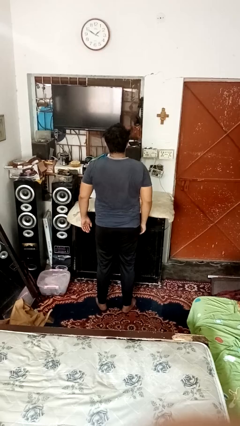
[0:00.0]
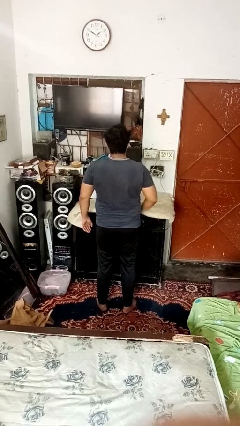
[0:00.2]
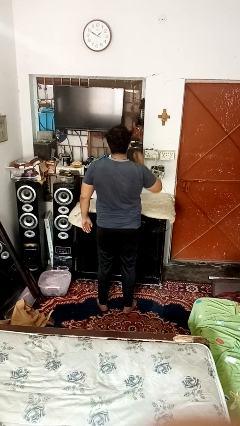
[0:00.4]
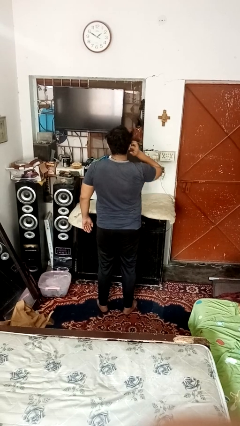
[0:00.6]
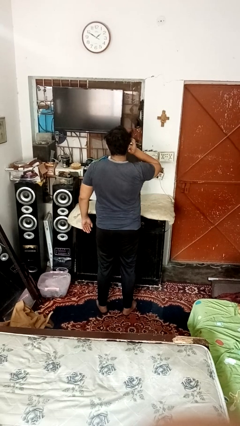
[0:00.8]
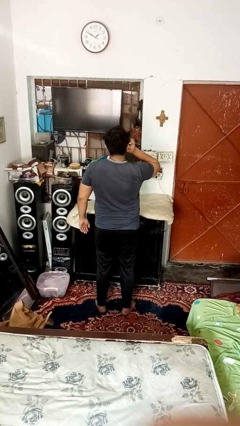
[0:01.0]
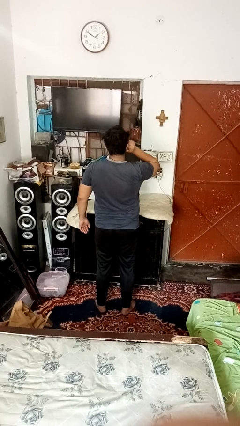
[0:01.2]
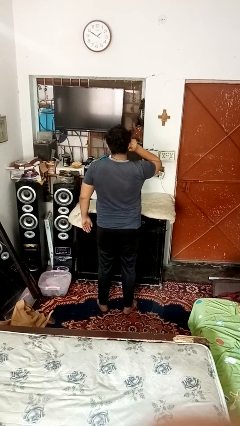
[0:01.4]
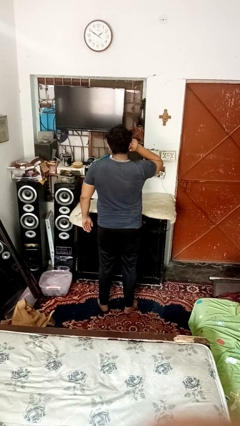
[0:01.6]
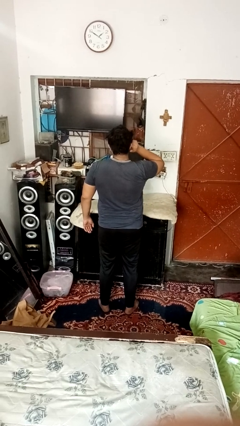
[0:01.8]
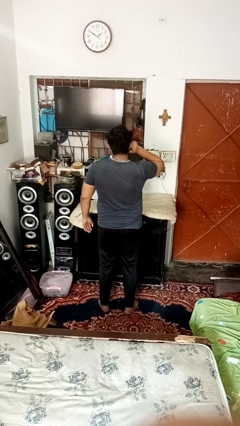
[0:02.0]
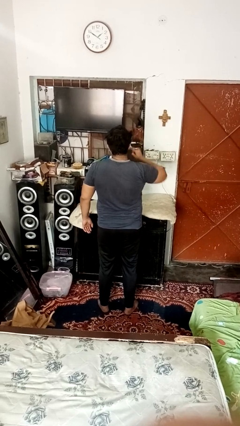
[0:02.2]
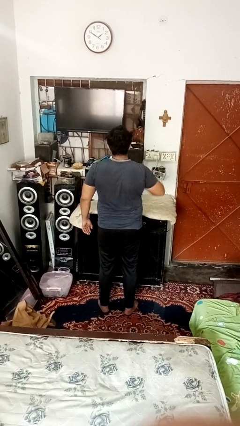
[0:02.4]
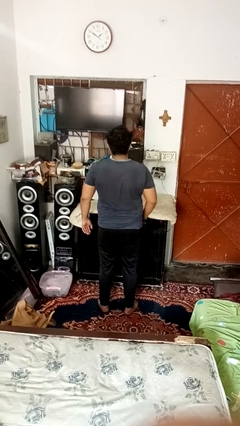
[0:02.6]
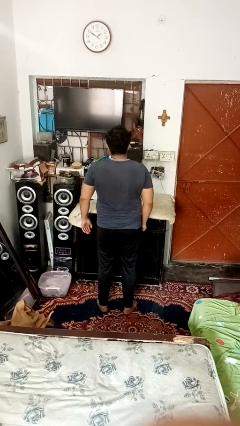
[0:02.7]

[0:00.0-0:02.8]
person puts fingers in ear

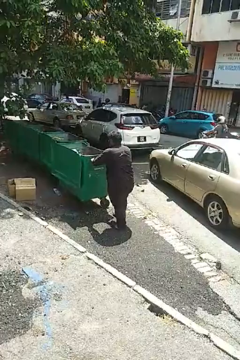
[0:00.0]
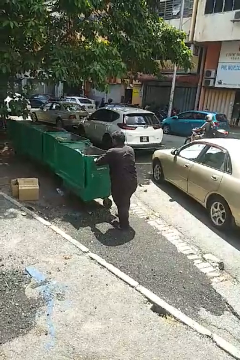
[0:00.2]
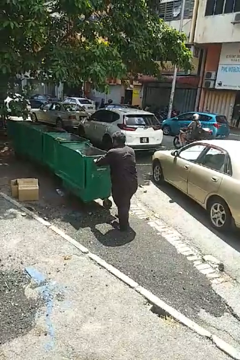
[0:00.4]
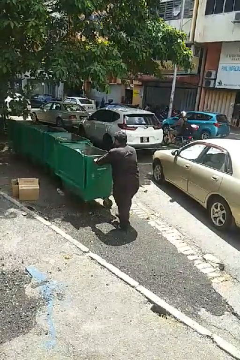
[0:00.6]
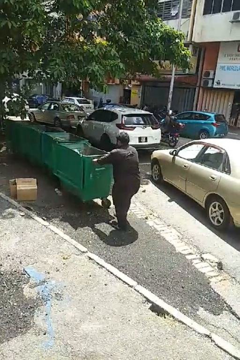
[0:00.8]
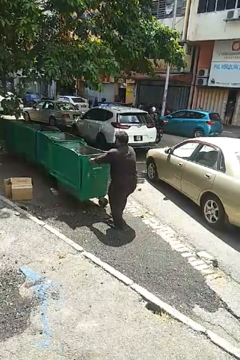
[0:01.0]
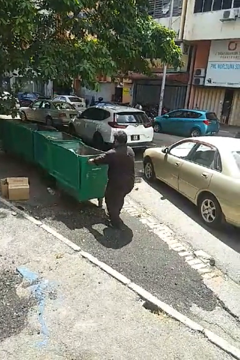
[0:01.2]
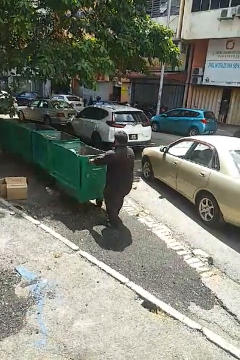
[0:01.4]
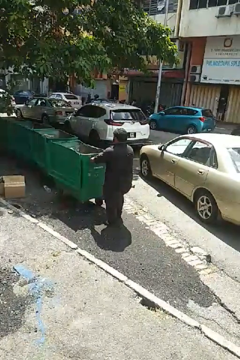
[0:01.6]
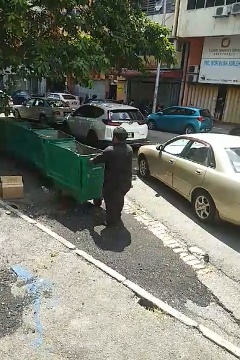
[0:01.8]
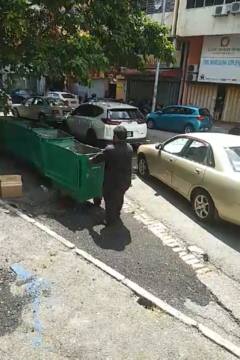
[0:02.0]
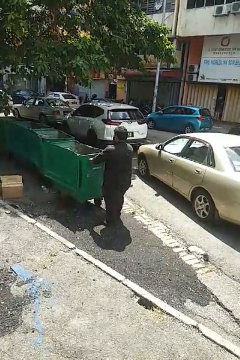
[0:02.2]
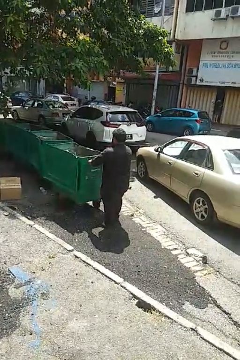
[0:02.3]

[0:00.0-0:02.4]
person pulls wheeled trashcan

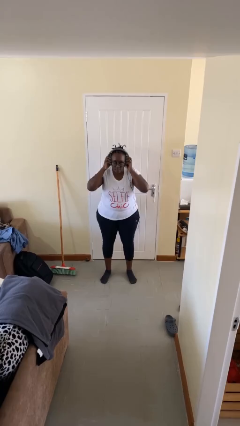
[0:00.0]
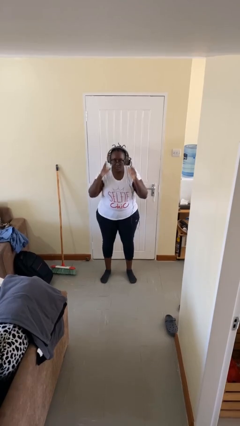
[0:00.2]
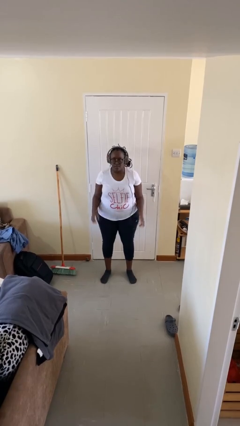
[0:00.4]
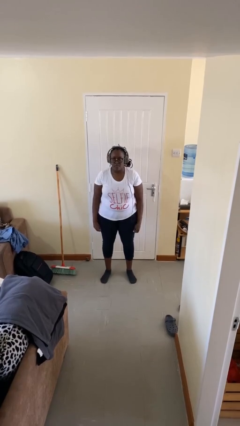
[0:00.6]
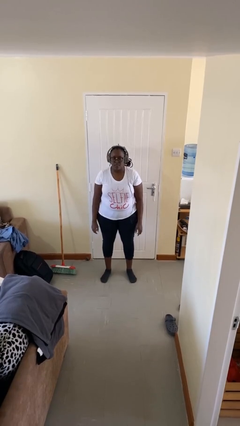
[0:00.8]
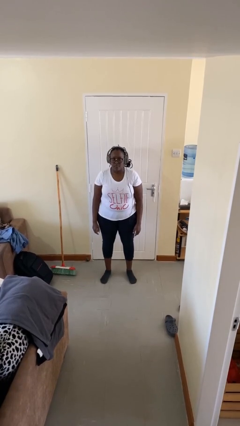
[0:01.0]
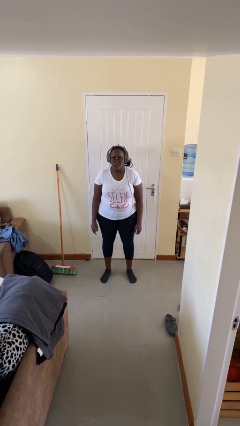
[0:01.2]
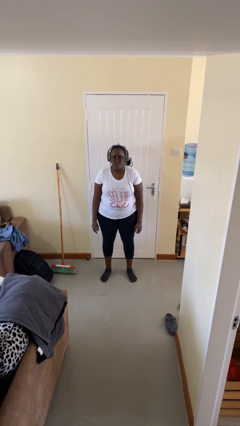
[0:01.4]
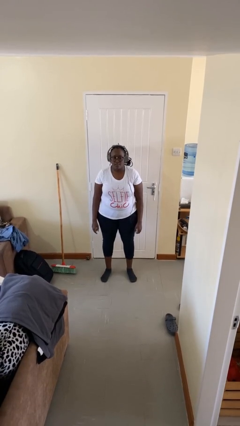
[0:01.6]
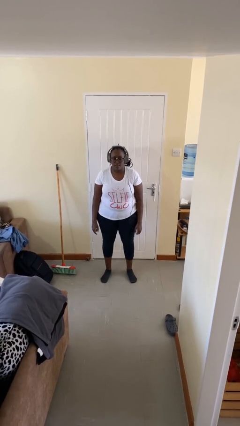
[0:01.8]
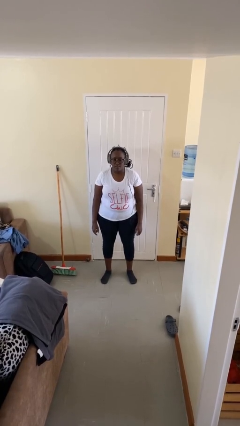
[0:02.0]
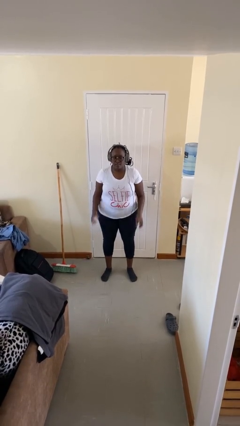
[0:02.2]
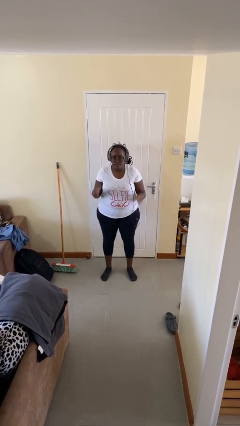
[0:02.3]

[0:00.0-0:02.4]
person puts on headphones

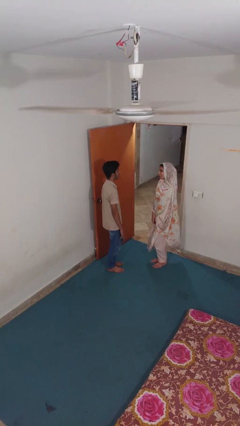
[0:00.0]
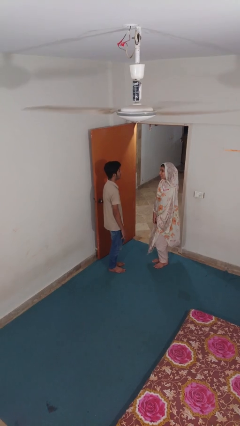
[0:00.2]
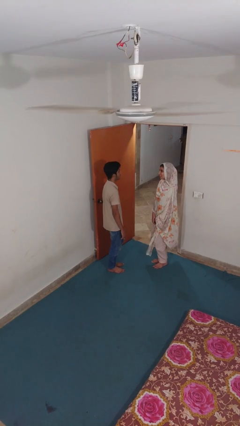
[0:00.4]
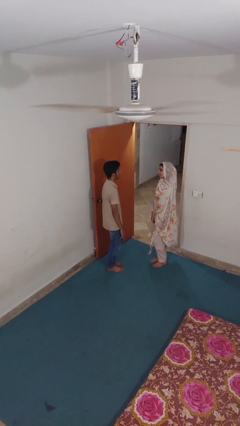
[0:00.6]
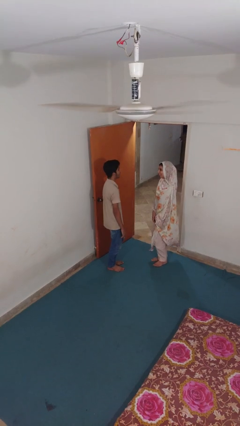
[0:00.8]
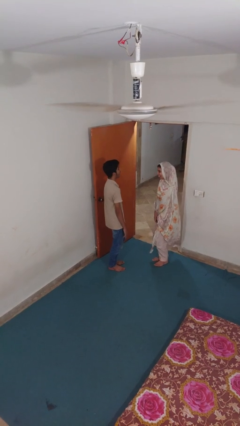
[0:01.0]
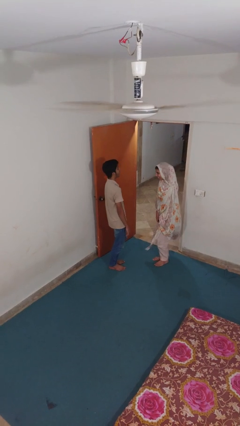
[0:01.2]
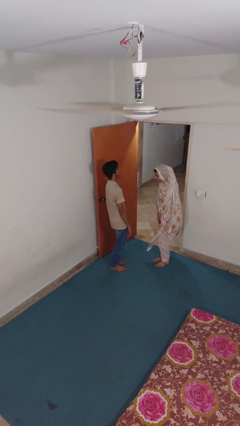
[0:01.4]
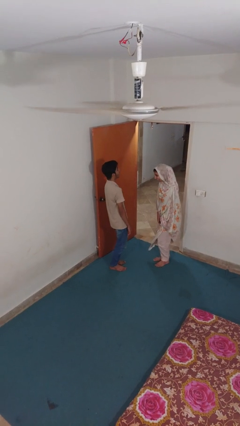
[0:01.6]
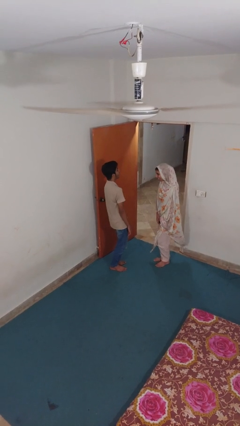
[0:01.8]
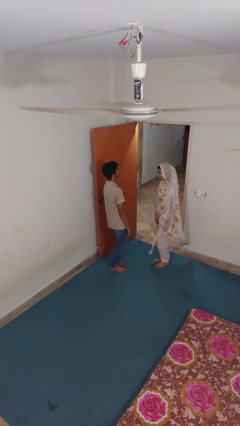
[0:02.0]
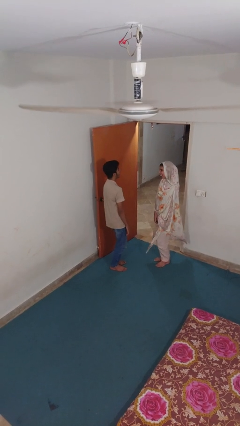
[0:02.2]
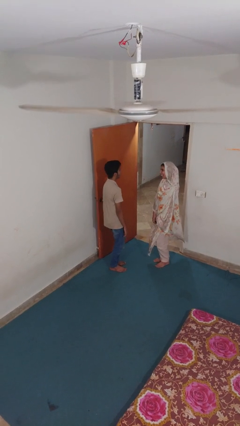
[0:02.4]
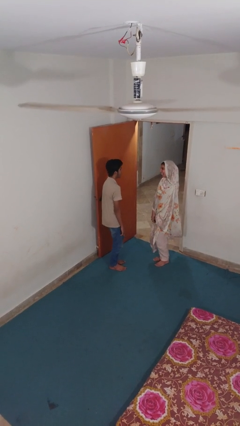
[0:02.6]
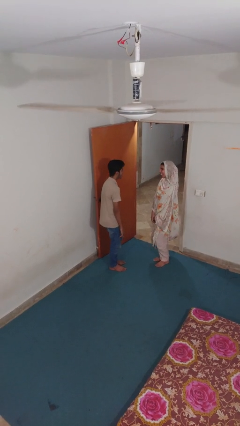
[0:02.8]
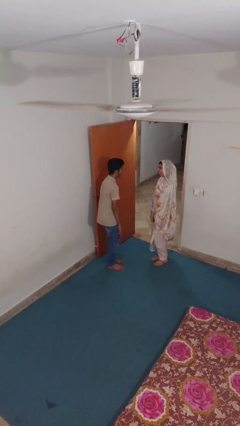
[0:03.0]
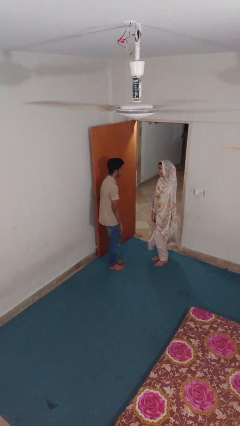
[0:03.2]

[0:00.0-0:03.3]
person laughs with person

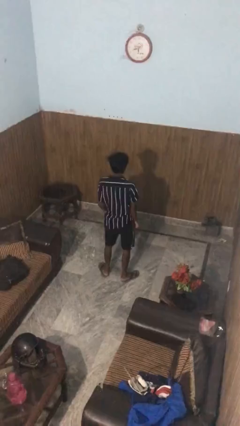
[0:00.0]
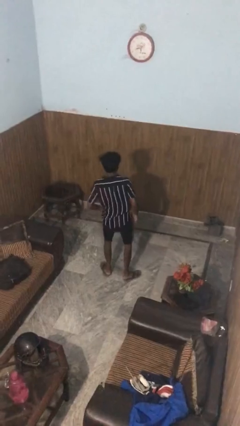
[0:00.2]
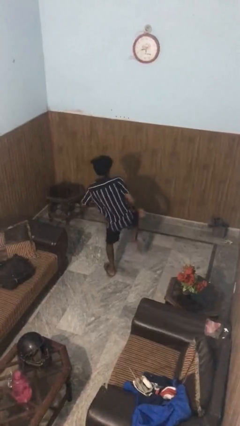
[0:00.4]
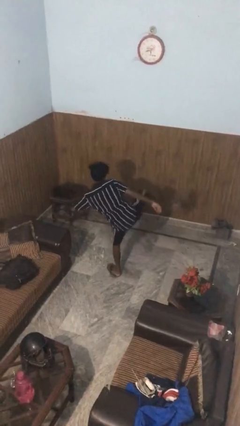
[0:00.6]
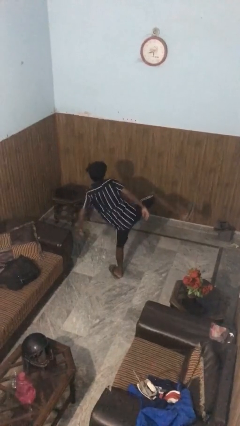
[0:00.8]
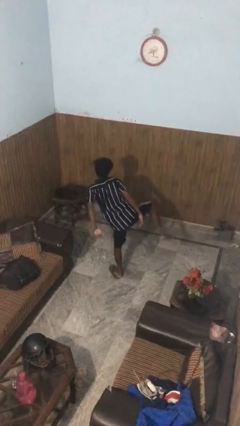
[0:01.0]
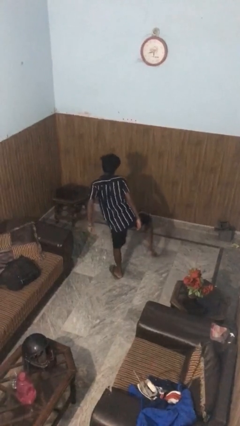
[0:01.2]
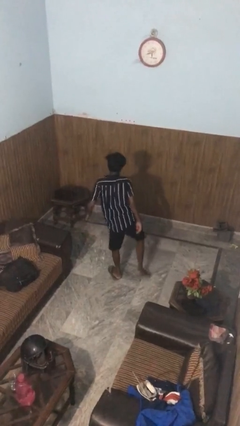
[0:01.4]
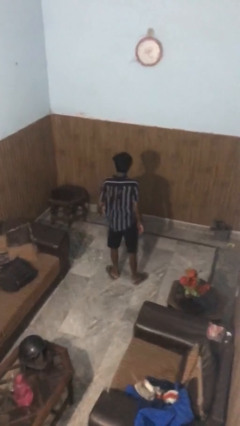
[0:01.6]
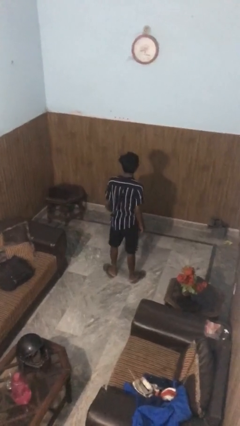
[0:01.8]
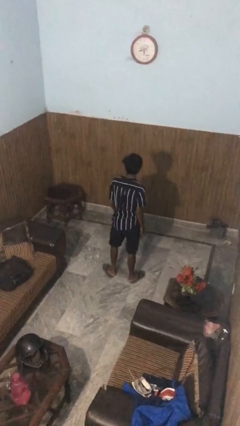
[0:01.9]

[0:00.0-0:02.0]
person karate kicks

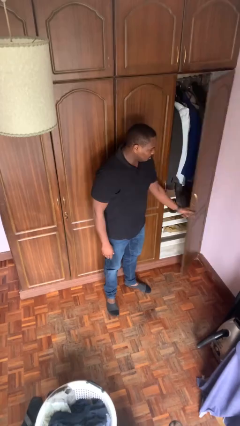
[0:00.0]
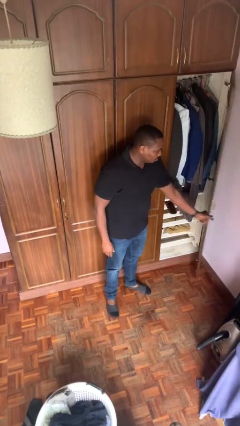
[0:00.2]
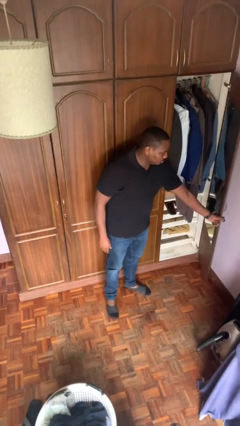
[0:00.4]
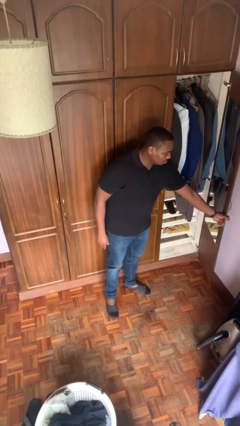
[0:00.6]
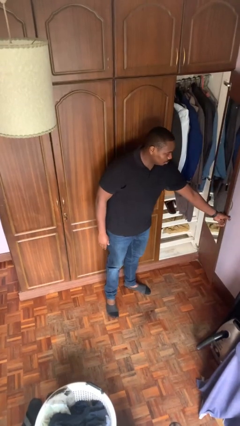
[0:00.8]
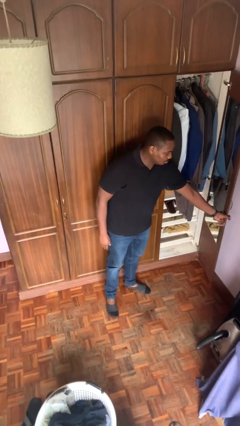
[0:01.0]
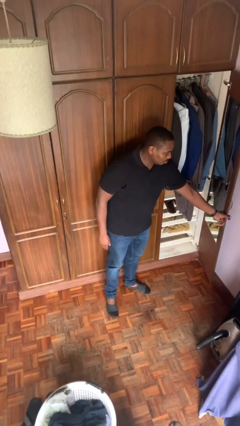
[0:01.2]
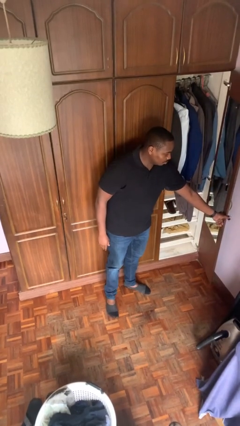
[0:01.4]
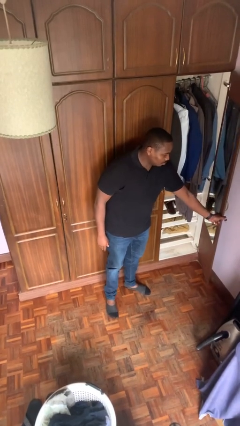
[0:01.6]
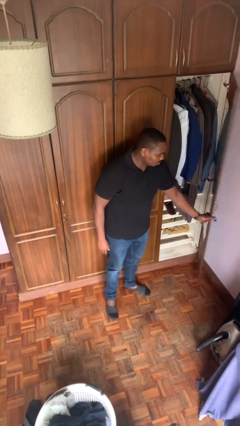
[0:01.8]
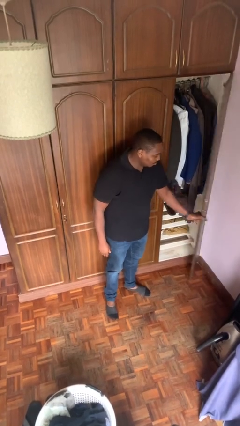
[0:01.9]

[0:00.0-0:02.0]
person opens closet door

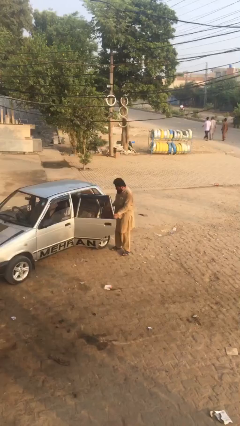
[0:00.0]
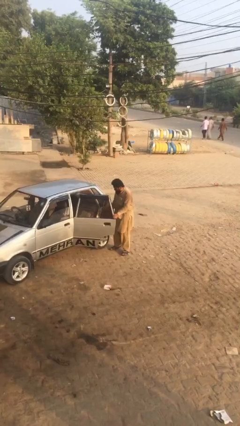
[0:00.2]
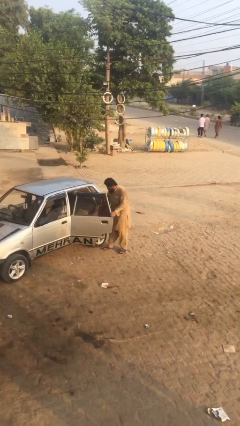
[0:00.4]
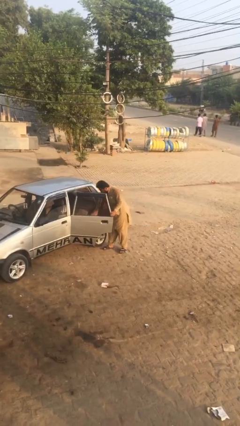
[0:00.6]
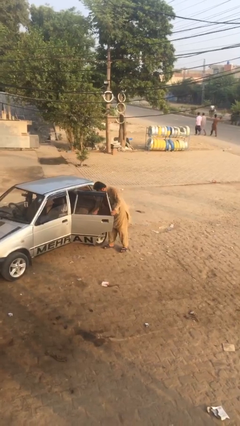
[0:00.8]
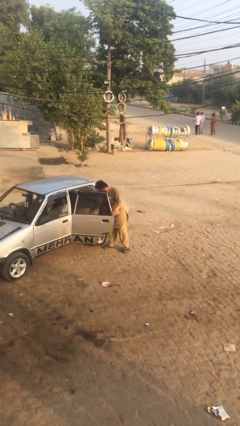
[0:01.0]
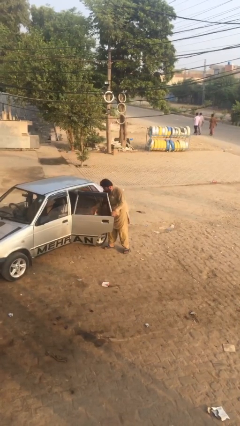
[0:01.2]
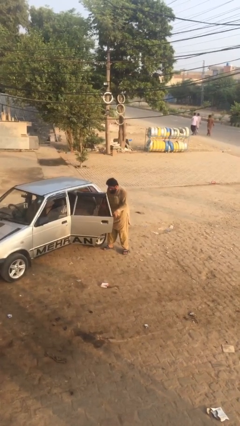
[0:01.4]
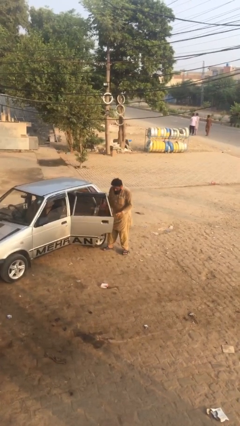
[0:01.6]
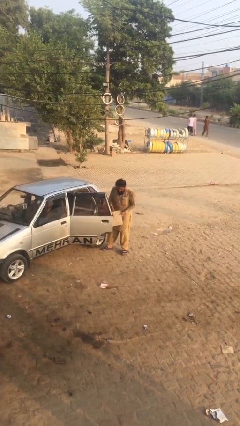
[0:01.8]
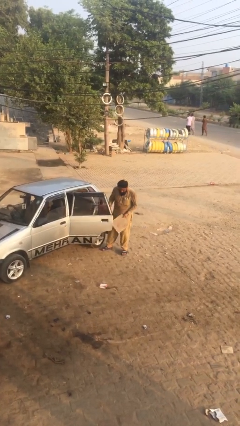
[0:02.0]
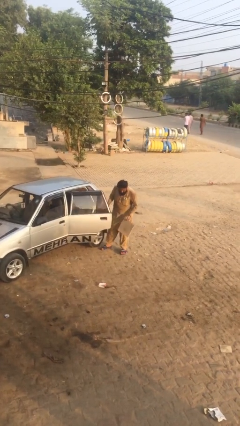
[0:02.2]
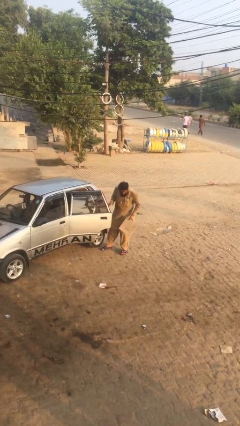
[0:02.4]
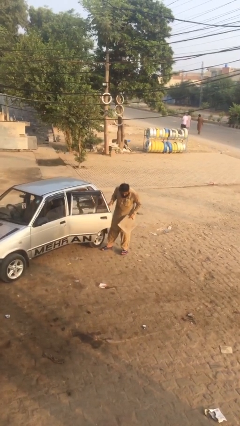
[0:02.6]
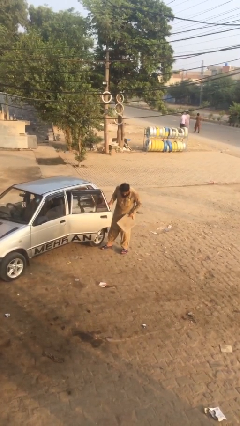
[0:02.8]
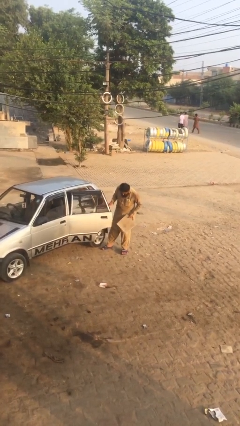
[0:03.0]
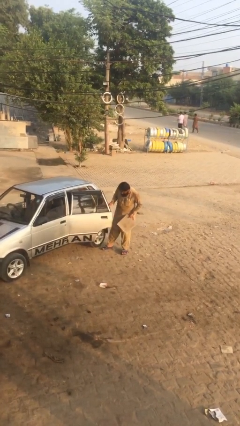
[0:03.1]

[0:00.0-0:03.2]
person unloads car
